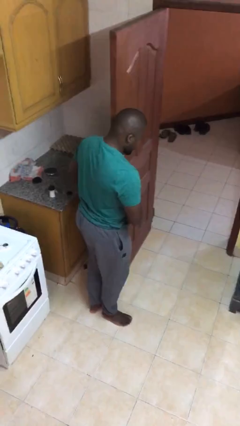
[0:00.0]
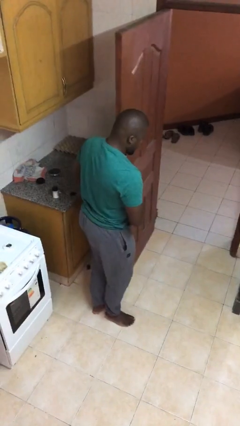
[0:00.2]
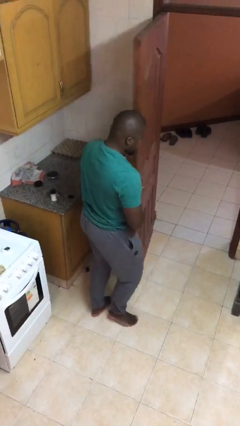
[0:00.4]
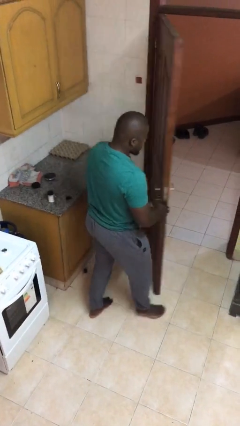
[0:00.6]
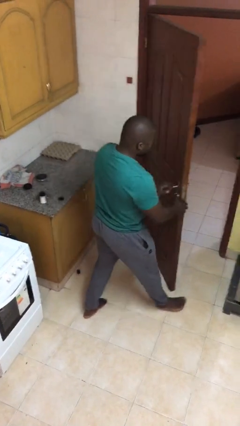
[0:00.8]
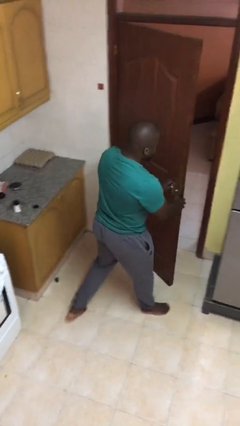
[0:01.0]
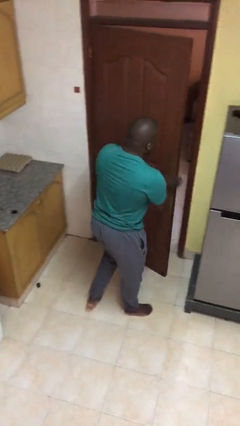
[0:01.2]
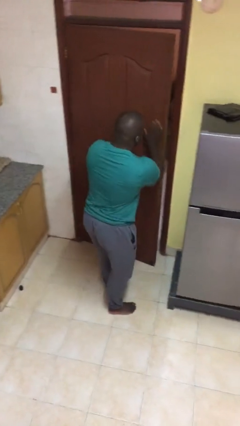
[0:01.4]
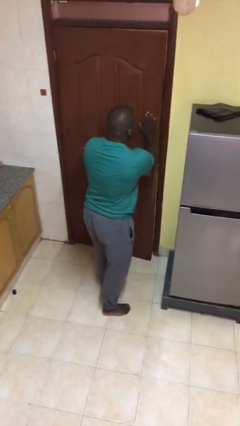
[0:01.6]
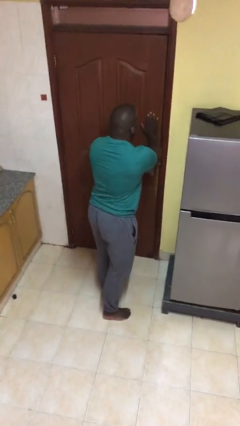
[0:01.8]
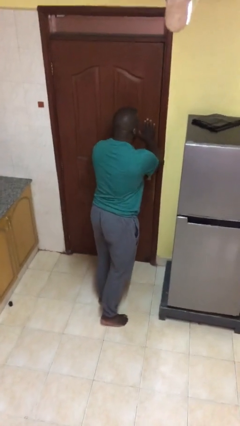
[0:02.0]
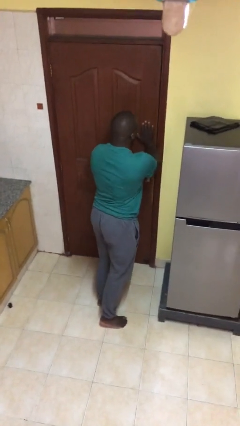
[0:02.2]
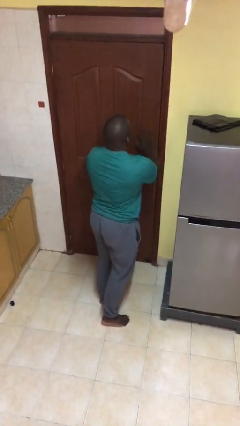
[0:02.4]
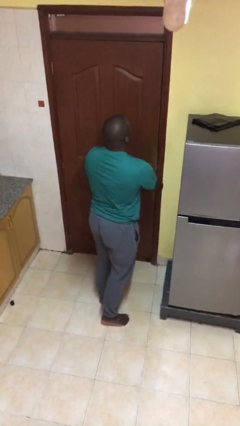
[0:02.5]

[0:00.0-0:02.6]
person closes facility door

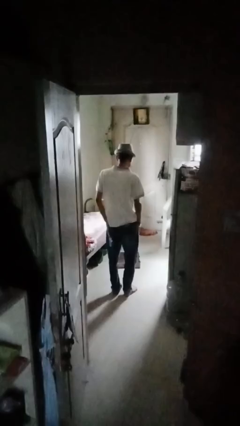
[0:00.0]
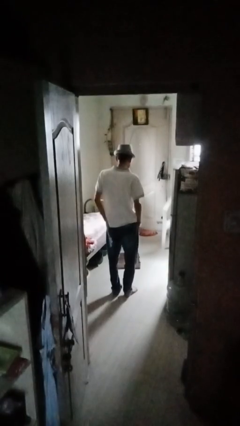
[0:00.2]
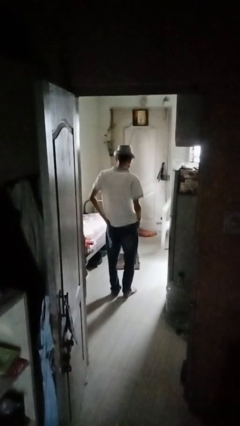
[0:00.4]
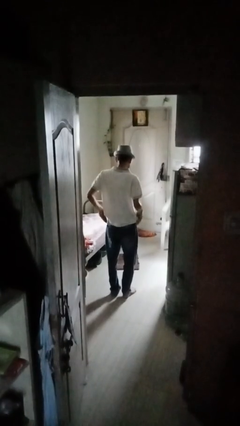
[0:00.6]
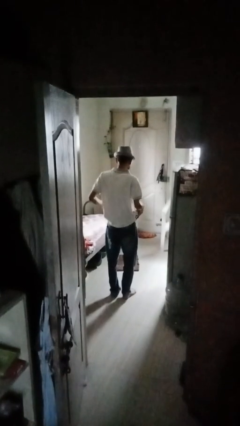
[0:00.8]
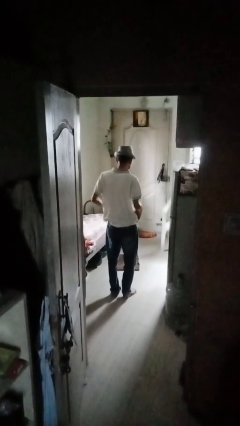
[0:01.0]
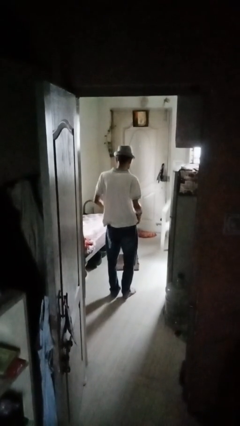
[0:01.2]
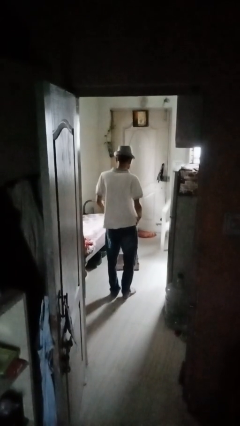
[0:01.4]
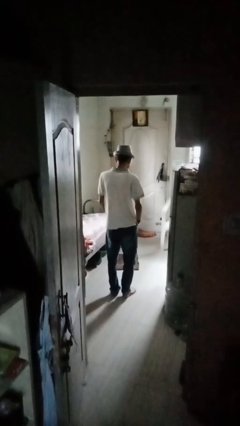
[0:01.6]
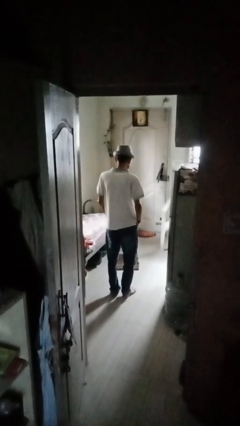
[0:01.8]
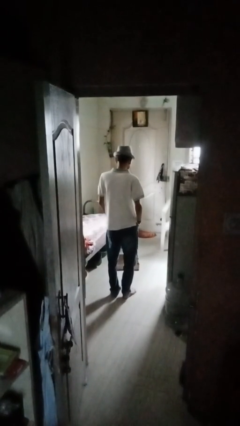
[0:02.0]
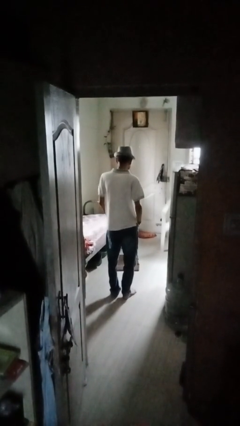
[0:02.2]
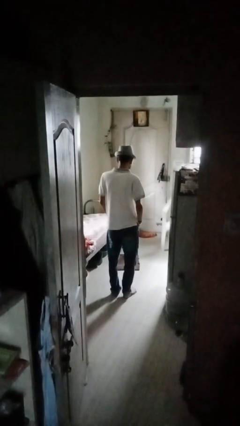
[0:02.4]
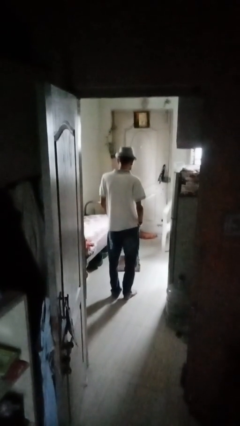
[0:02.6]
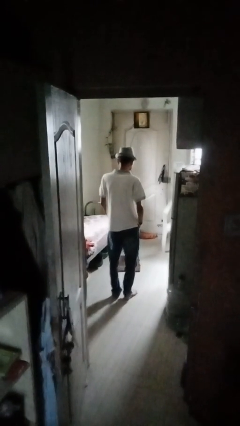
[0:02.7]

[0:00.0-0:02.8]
person puts hands in back pockets

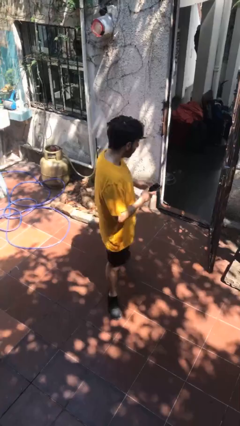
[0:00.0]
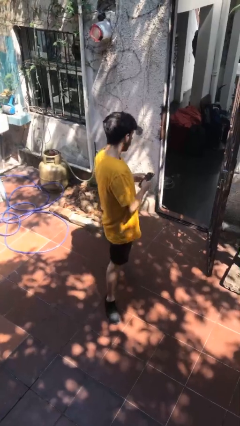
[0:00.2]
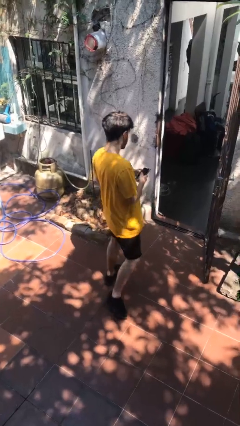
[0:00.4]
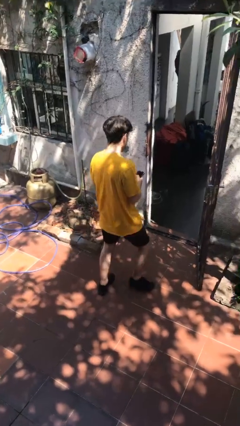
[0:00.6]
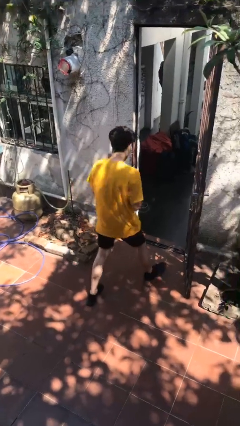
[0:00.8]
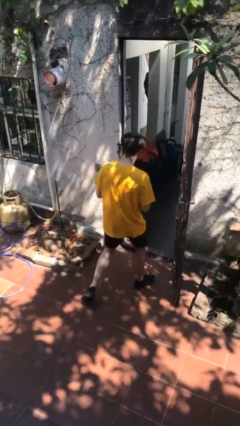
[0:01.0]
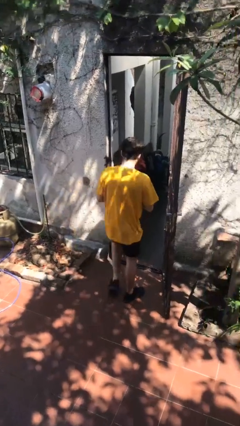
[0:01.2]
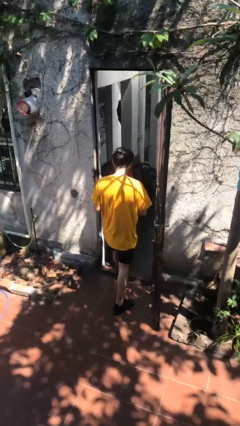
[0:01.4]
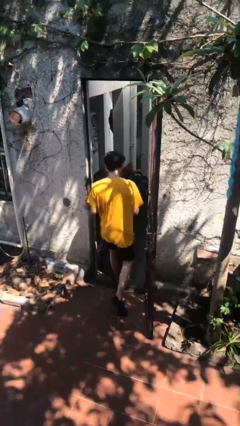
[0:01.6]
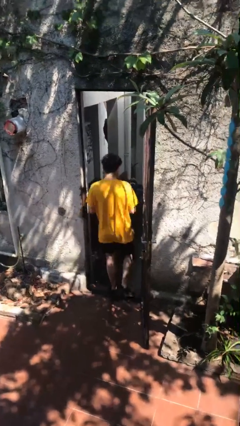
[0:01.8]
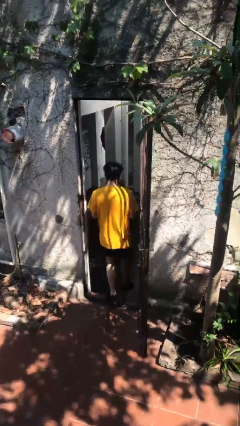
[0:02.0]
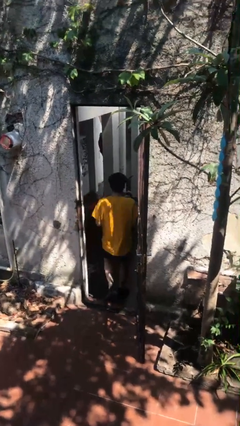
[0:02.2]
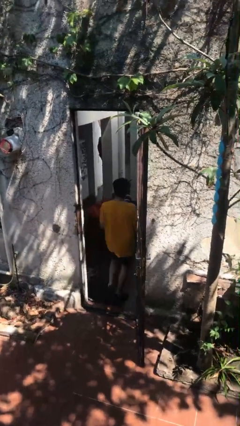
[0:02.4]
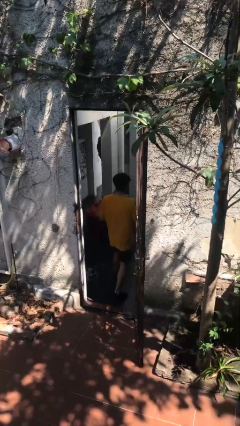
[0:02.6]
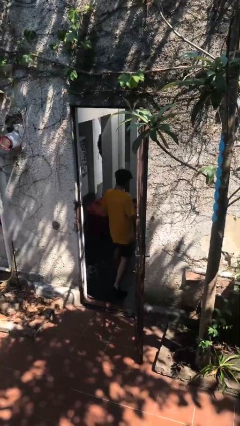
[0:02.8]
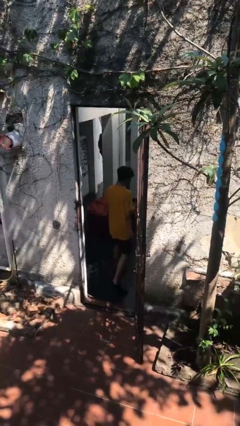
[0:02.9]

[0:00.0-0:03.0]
person exits scene through structure

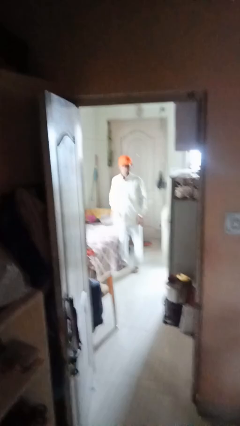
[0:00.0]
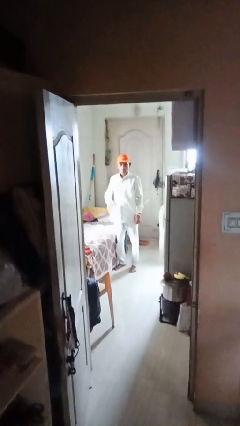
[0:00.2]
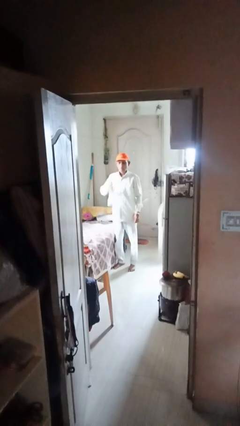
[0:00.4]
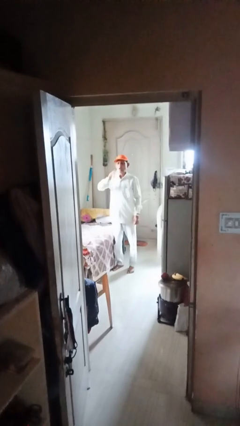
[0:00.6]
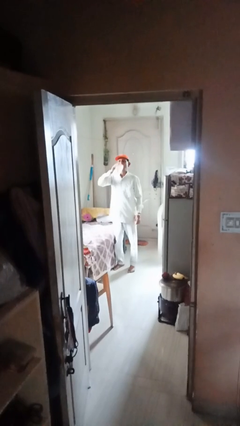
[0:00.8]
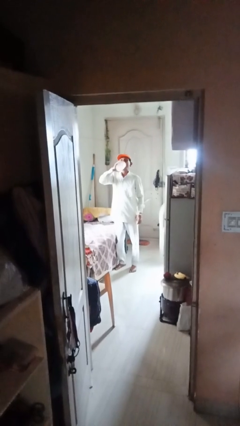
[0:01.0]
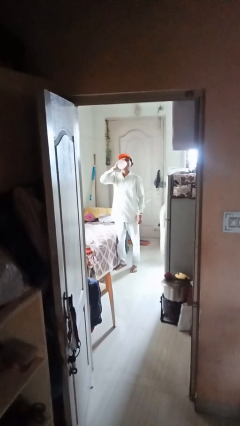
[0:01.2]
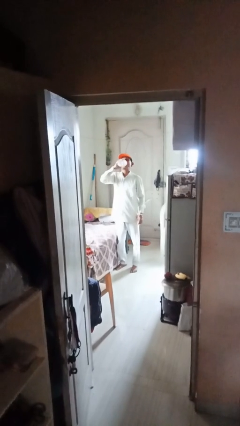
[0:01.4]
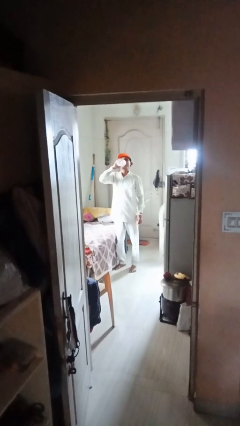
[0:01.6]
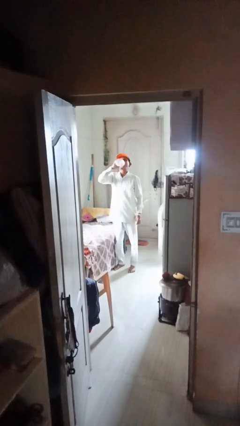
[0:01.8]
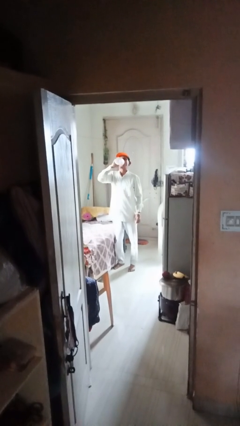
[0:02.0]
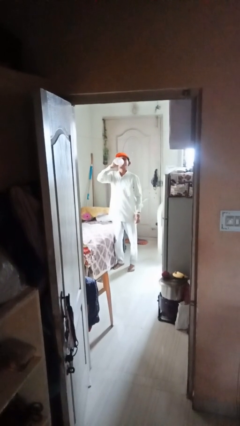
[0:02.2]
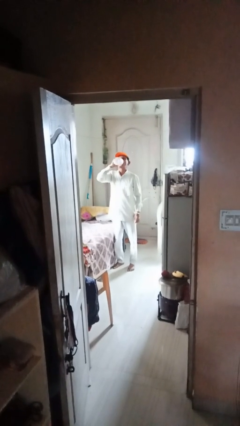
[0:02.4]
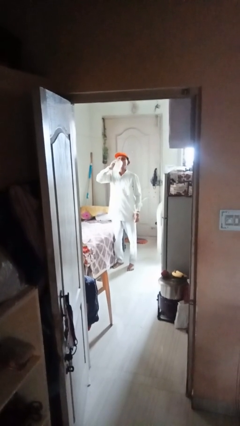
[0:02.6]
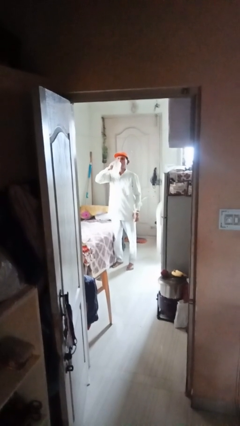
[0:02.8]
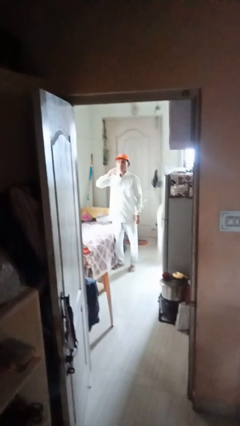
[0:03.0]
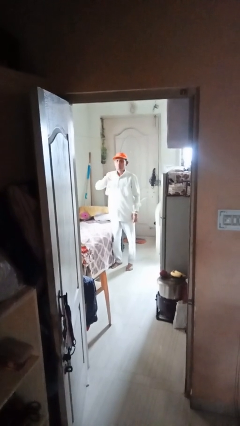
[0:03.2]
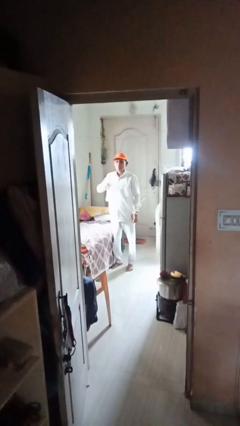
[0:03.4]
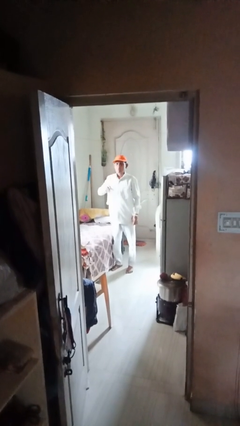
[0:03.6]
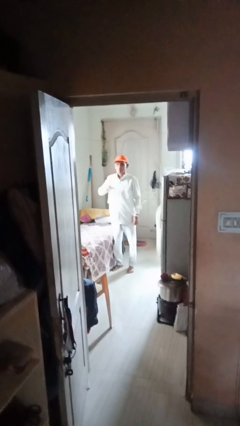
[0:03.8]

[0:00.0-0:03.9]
person drinks from bottle

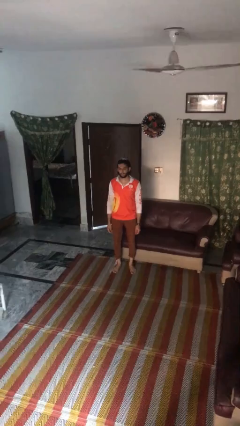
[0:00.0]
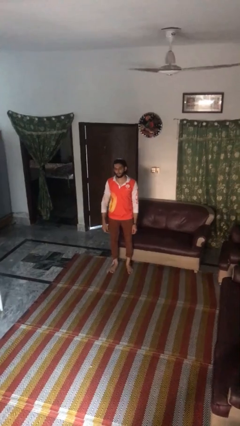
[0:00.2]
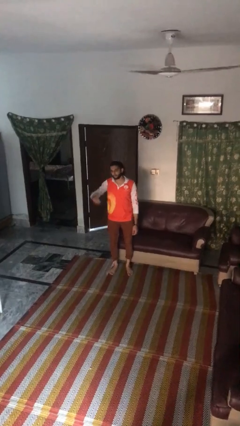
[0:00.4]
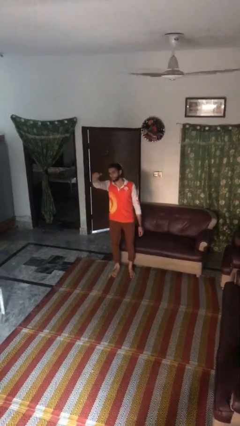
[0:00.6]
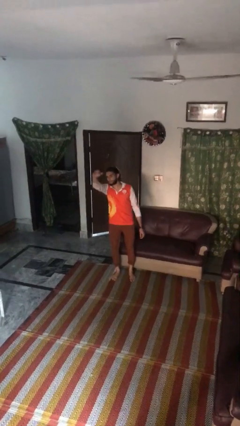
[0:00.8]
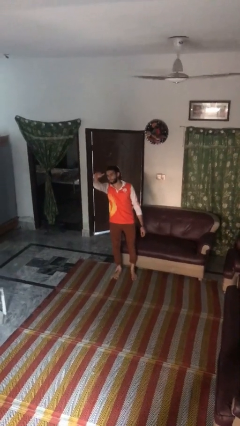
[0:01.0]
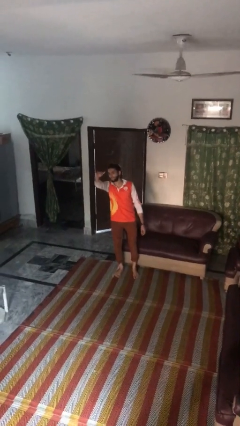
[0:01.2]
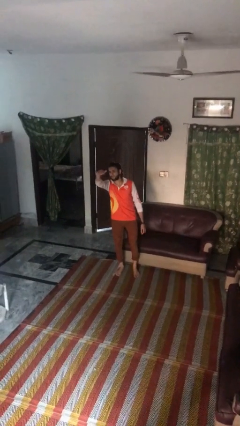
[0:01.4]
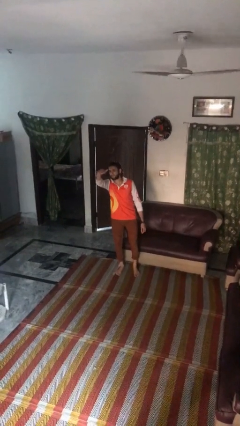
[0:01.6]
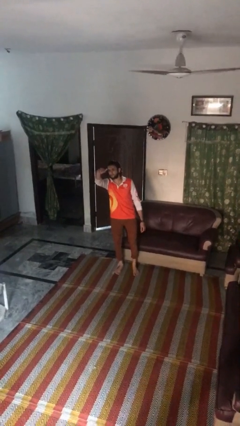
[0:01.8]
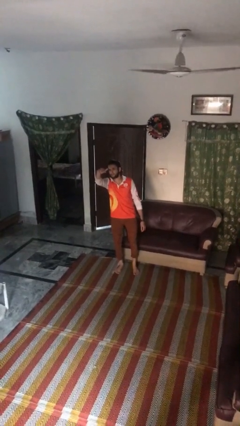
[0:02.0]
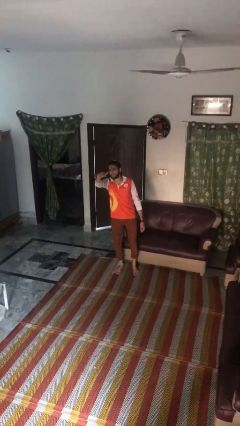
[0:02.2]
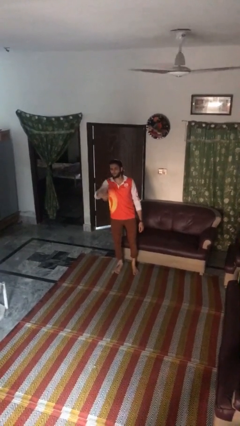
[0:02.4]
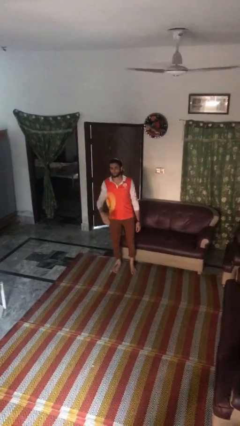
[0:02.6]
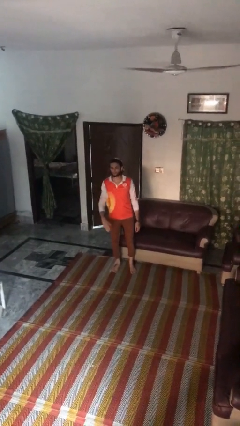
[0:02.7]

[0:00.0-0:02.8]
person gestures come here

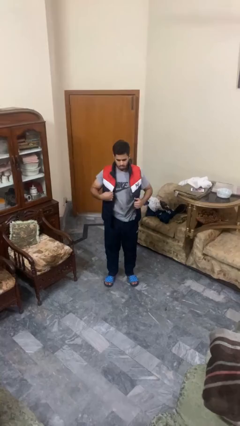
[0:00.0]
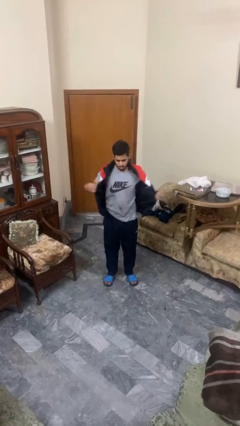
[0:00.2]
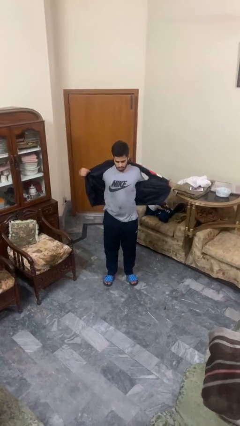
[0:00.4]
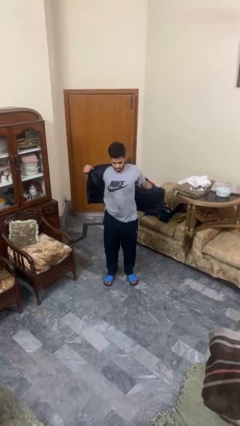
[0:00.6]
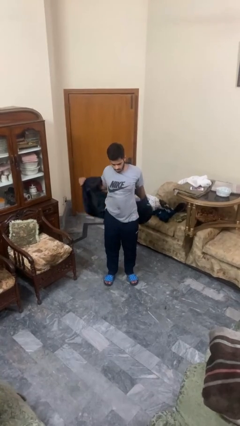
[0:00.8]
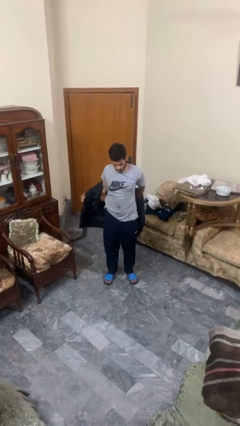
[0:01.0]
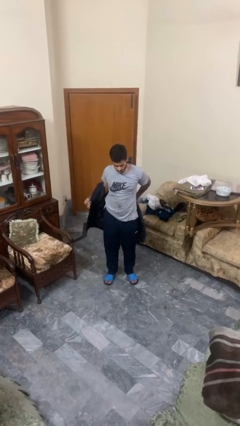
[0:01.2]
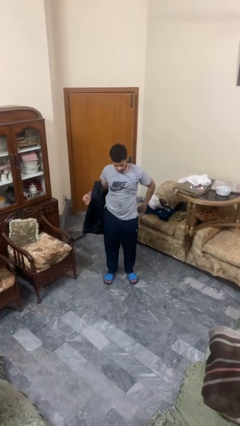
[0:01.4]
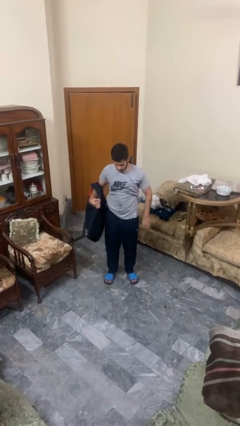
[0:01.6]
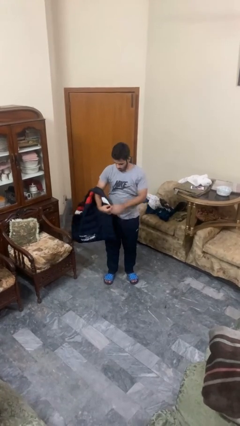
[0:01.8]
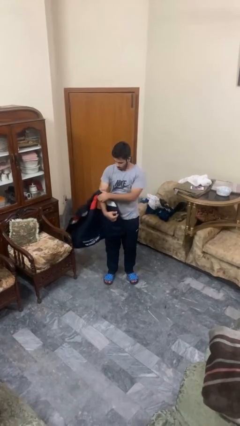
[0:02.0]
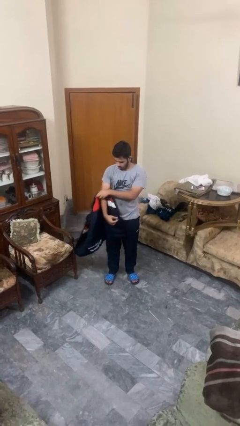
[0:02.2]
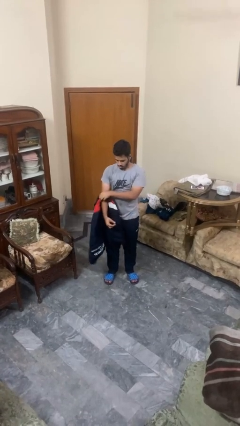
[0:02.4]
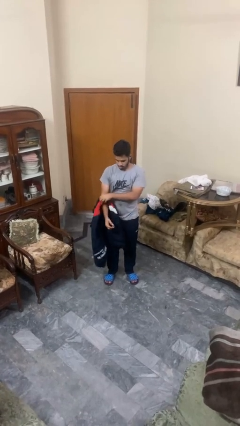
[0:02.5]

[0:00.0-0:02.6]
person takes off jacket
